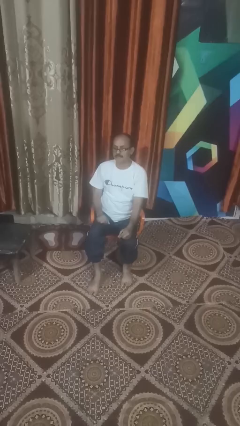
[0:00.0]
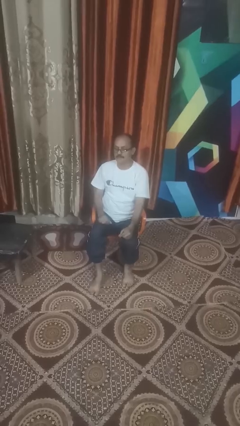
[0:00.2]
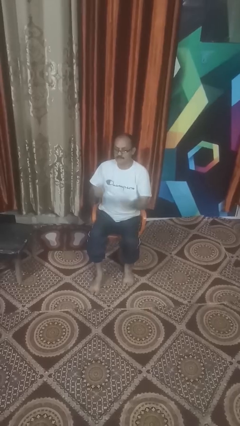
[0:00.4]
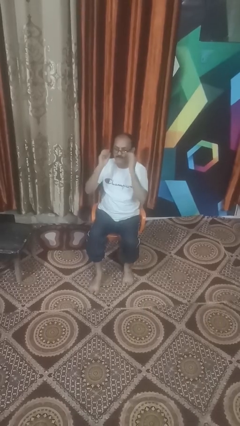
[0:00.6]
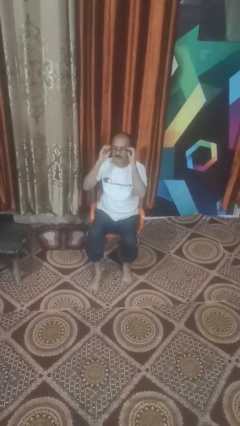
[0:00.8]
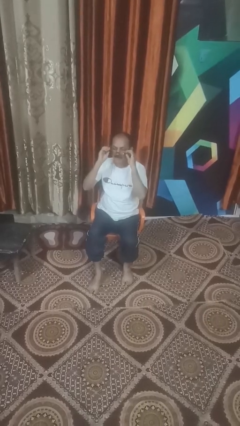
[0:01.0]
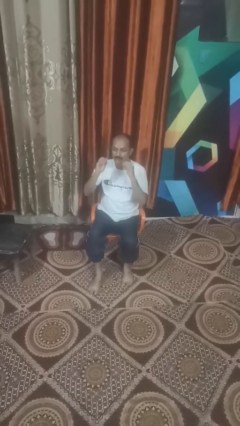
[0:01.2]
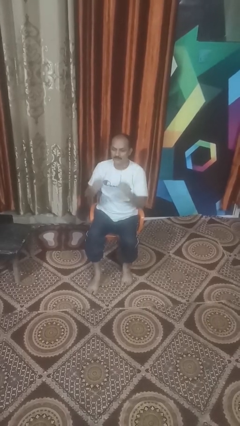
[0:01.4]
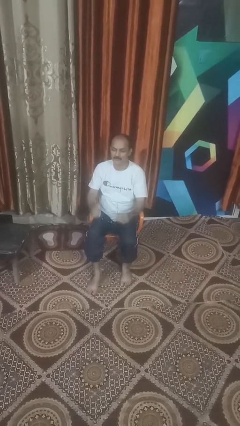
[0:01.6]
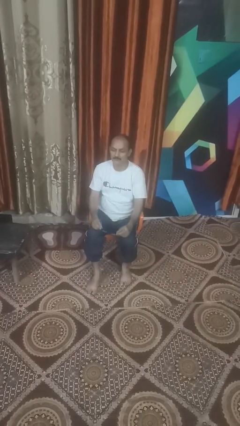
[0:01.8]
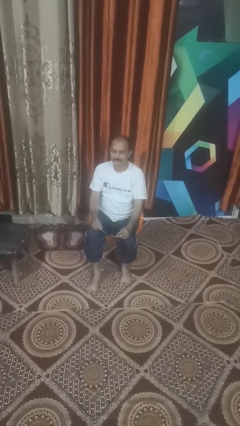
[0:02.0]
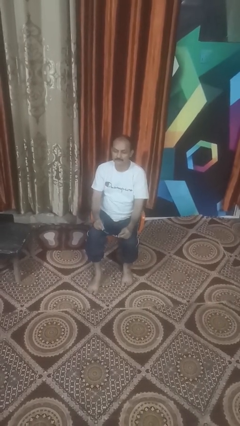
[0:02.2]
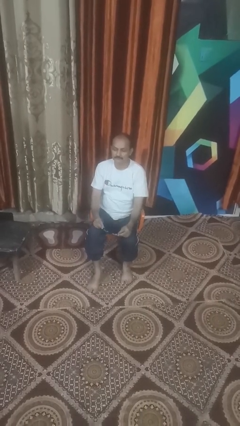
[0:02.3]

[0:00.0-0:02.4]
person takes off glasses

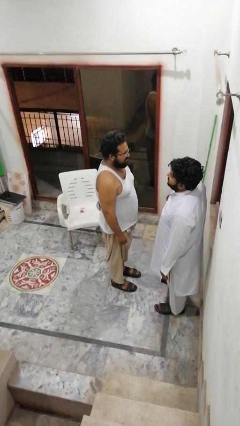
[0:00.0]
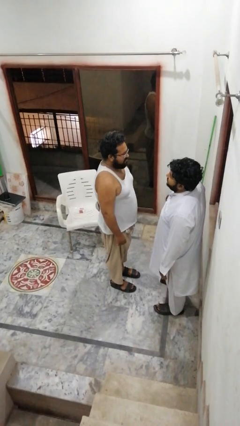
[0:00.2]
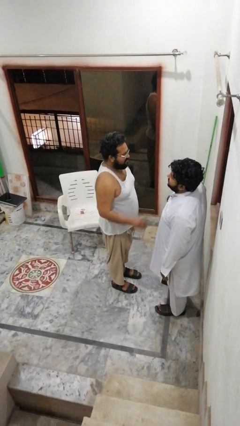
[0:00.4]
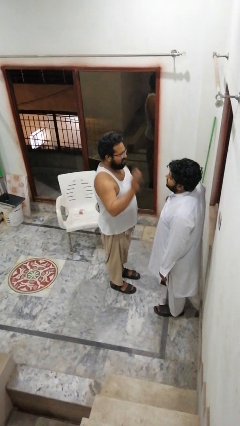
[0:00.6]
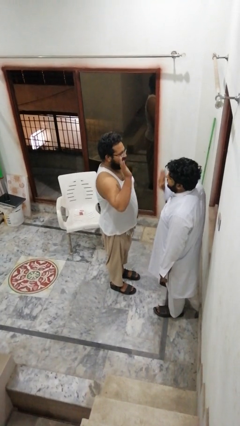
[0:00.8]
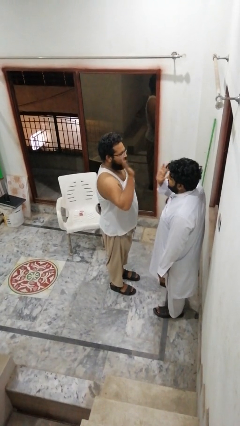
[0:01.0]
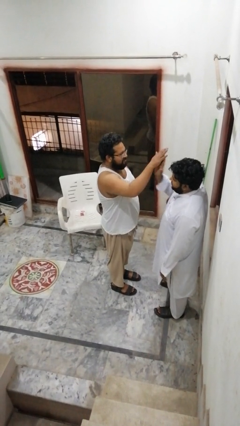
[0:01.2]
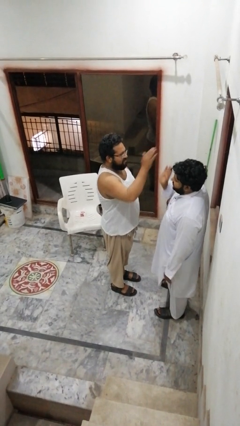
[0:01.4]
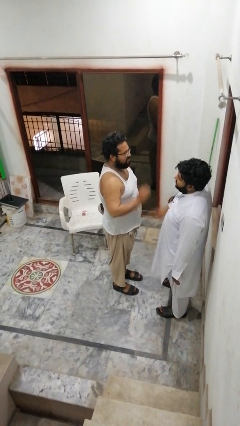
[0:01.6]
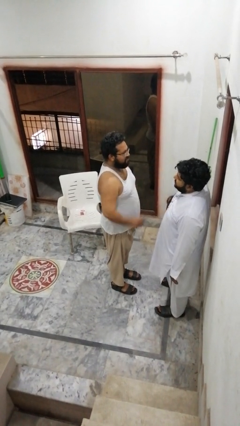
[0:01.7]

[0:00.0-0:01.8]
person highfives hand

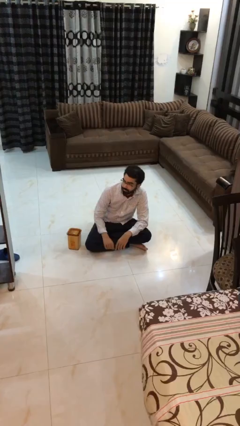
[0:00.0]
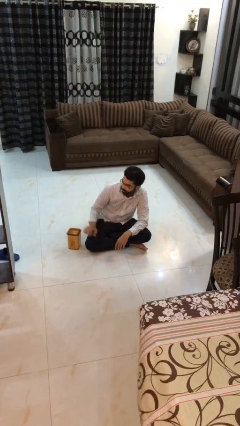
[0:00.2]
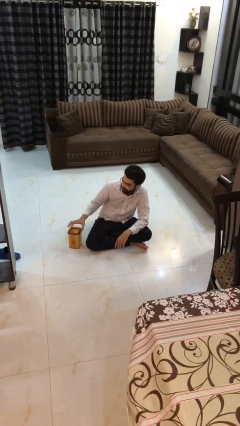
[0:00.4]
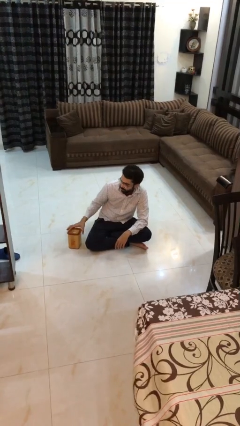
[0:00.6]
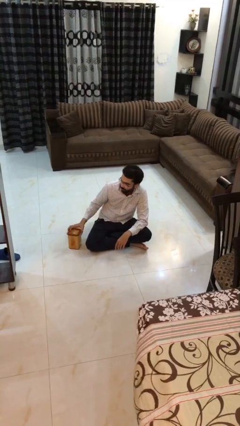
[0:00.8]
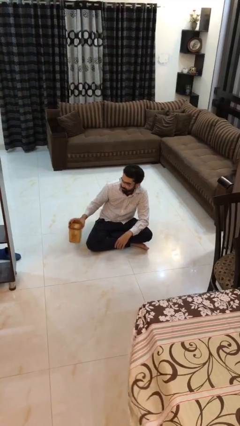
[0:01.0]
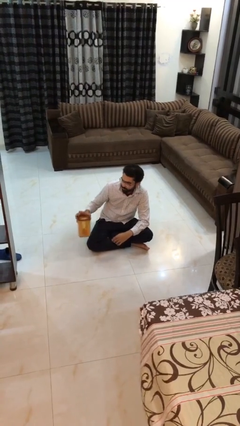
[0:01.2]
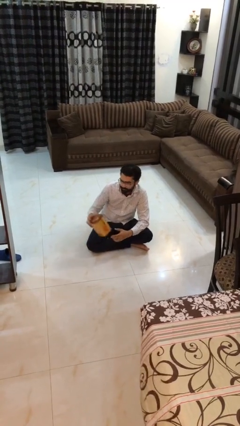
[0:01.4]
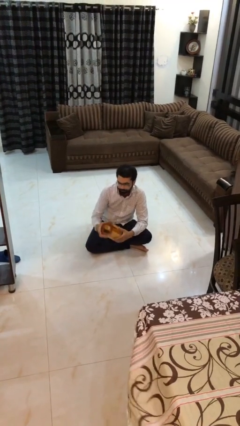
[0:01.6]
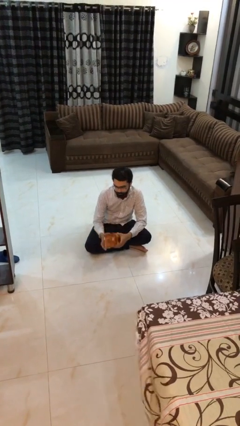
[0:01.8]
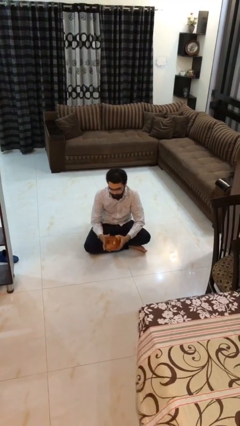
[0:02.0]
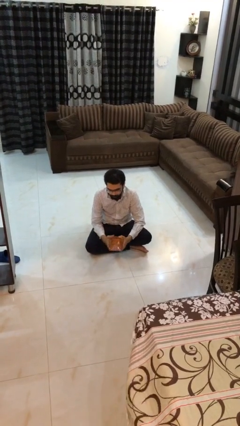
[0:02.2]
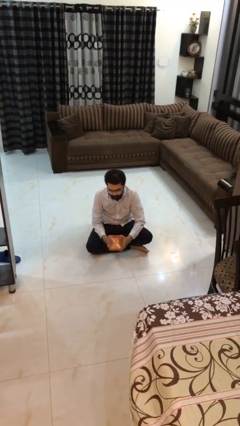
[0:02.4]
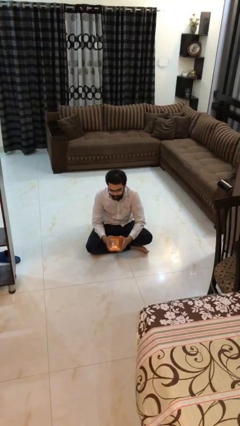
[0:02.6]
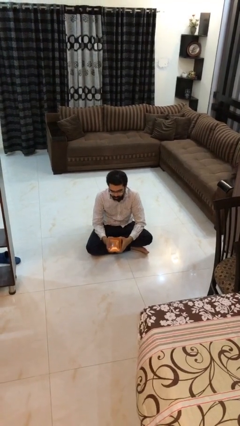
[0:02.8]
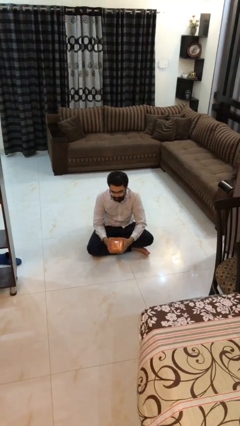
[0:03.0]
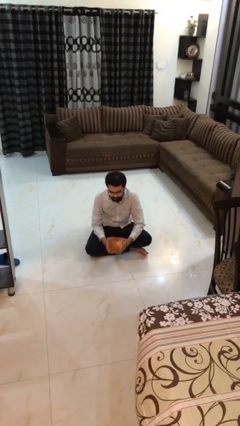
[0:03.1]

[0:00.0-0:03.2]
person picks up object from floor

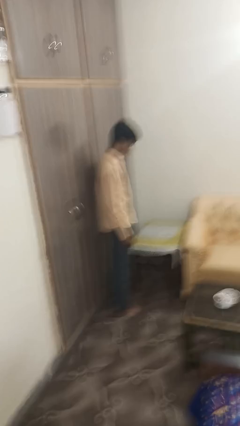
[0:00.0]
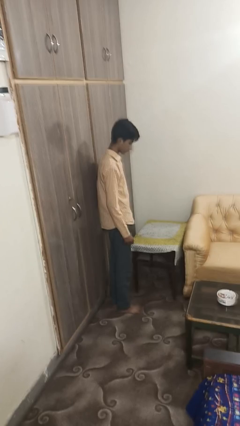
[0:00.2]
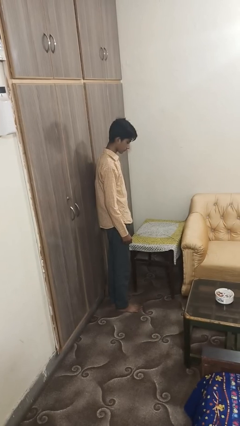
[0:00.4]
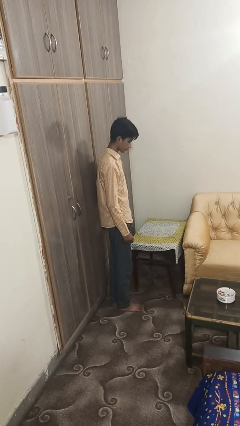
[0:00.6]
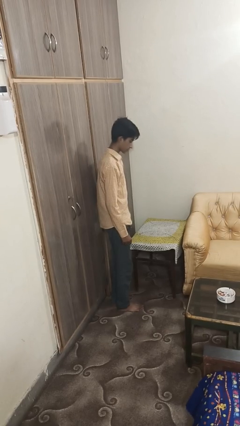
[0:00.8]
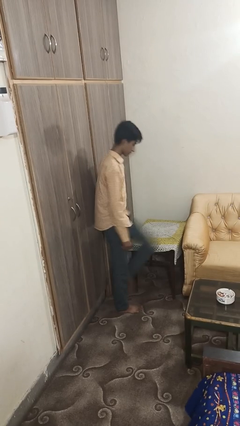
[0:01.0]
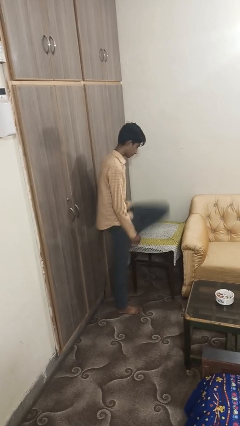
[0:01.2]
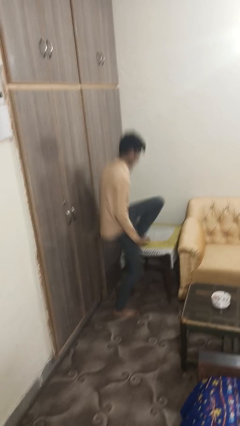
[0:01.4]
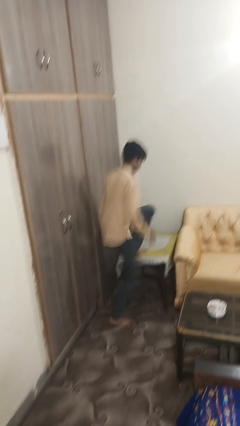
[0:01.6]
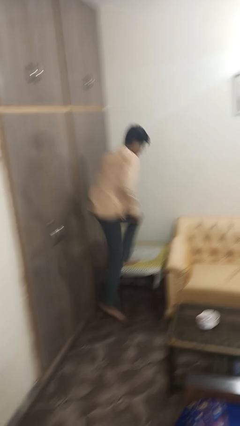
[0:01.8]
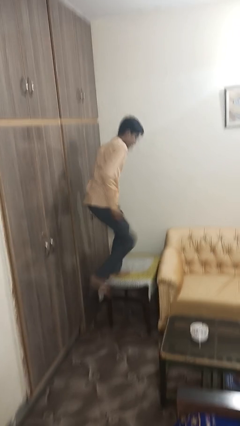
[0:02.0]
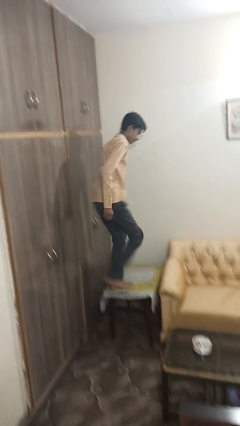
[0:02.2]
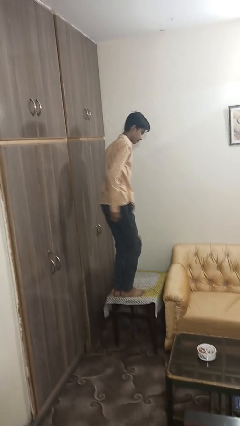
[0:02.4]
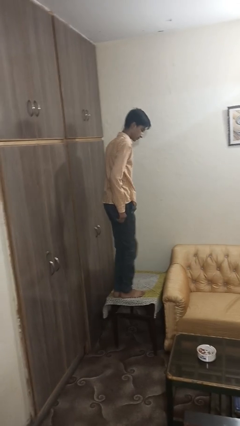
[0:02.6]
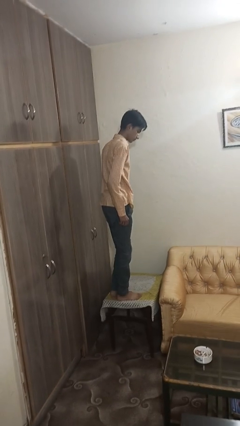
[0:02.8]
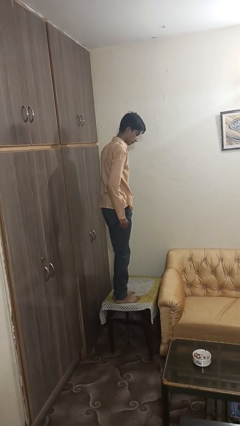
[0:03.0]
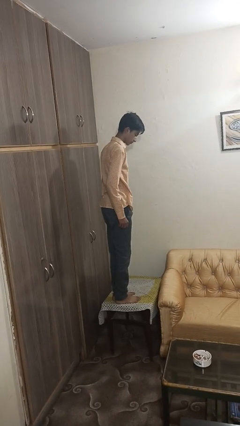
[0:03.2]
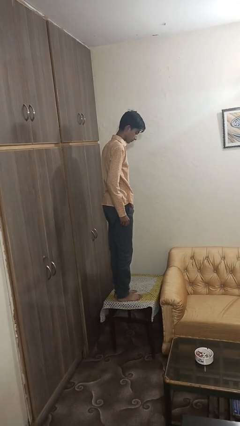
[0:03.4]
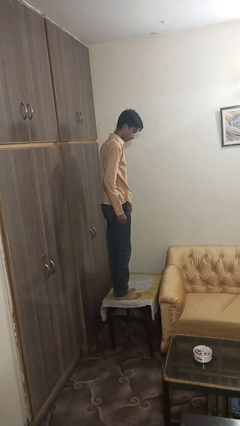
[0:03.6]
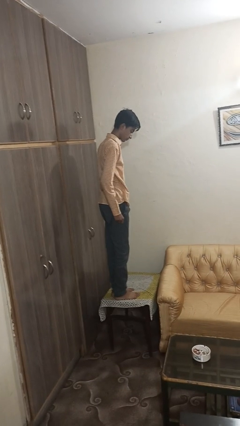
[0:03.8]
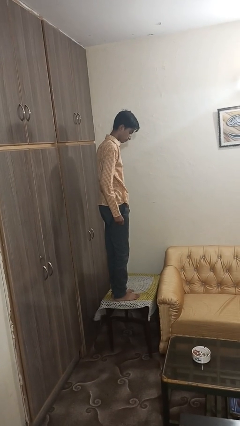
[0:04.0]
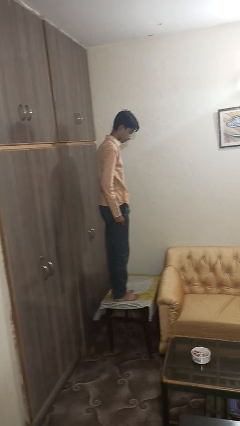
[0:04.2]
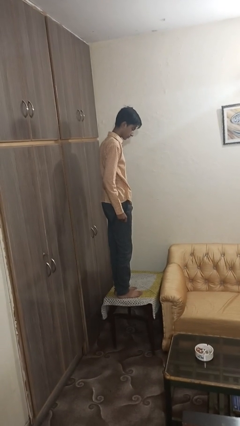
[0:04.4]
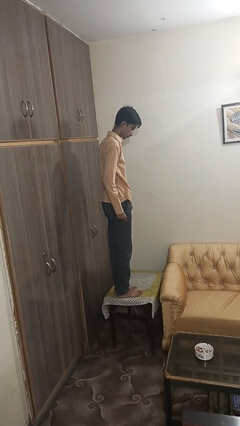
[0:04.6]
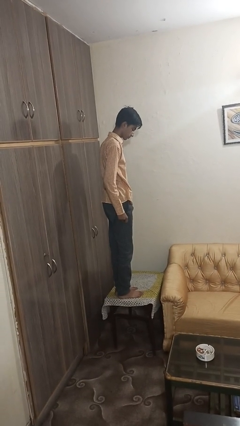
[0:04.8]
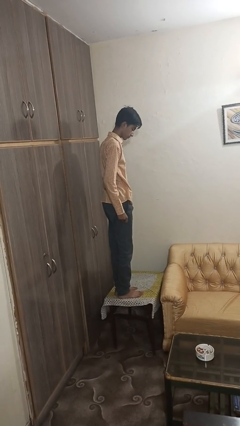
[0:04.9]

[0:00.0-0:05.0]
person climbs on table

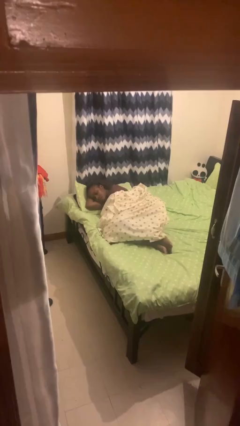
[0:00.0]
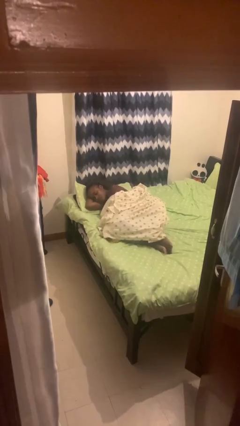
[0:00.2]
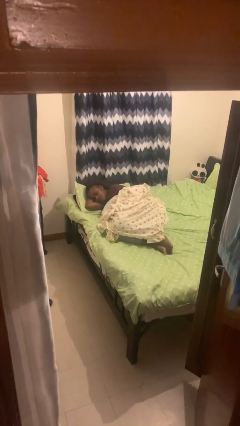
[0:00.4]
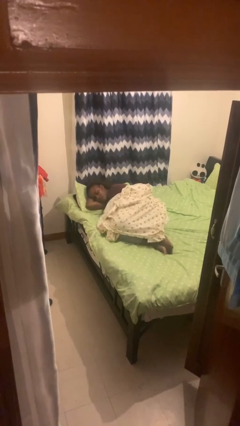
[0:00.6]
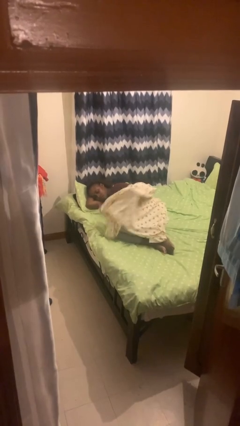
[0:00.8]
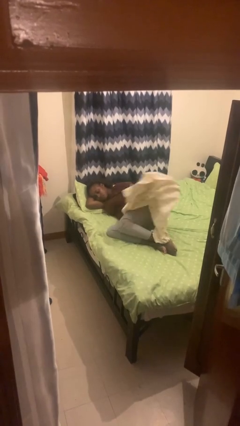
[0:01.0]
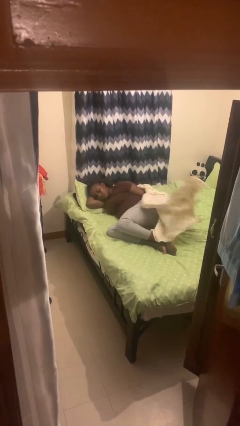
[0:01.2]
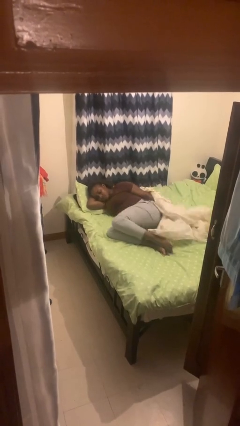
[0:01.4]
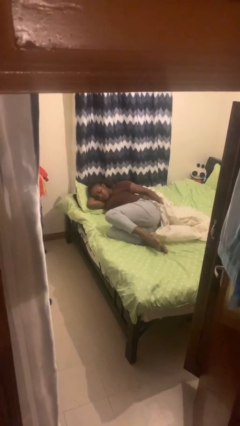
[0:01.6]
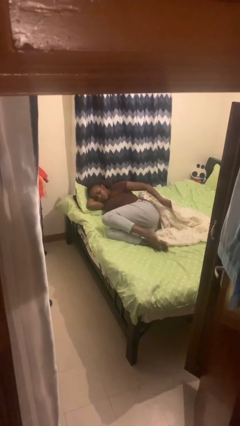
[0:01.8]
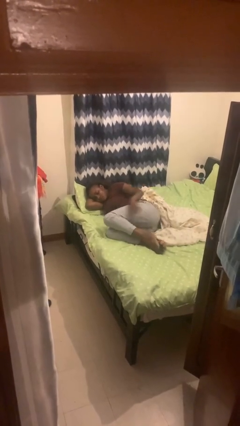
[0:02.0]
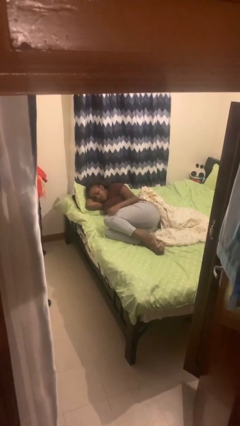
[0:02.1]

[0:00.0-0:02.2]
person uncovers with bedsheets

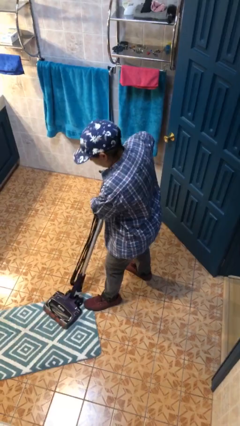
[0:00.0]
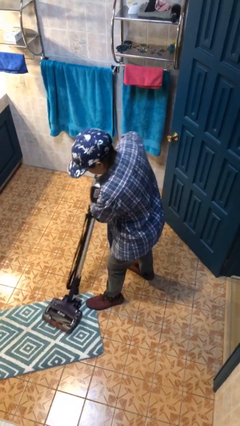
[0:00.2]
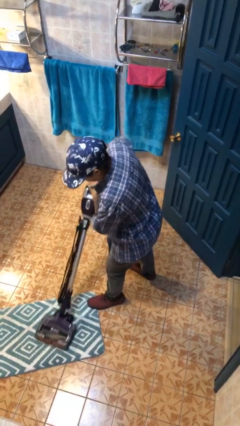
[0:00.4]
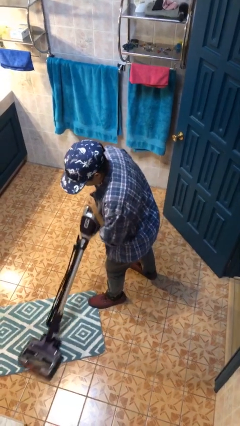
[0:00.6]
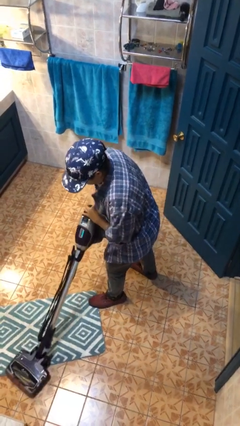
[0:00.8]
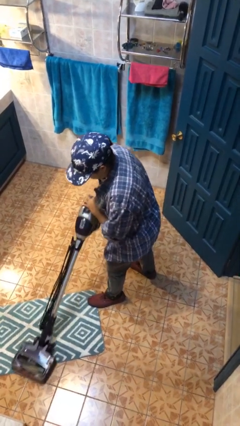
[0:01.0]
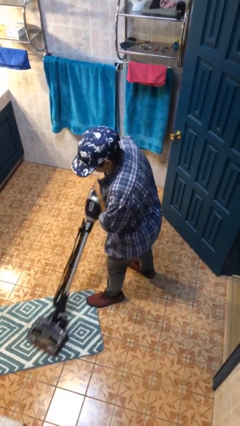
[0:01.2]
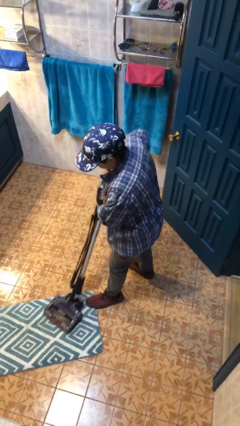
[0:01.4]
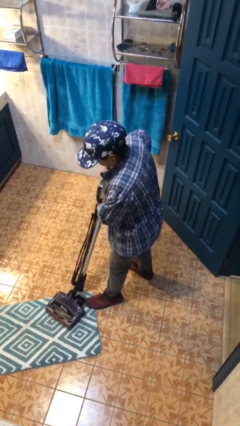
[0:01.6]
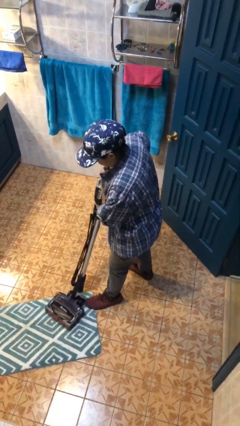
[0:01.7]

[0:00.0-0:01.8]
person vacuums carpet

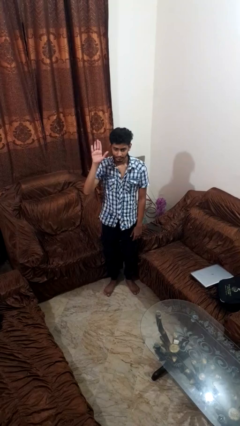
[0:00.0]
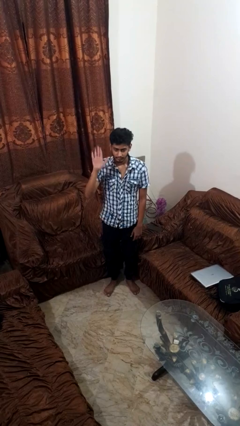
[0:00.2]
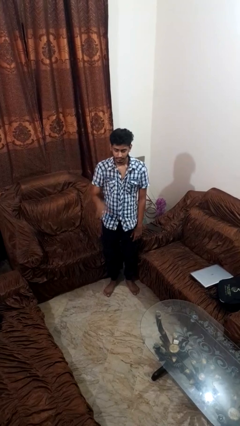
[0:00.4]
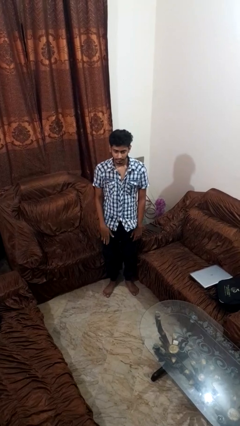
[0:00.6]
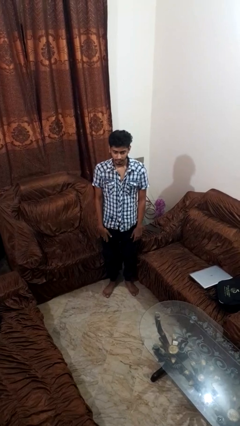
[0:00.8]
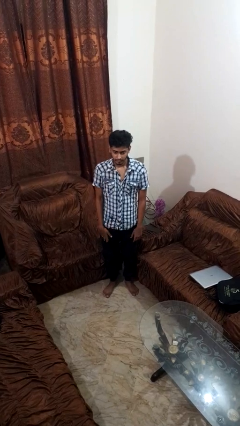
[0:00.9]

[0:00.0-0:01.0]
person gestures lower hand
